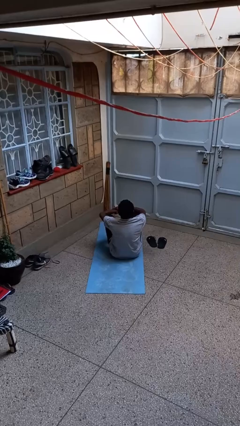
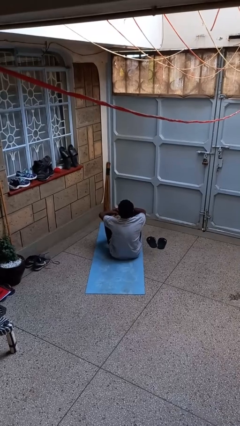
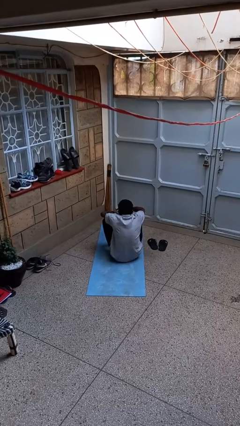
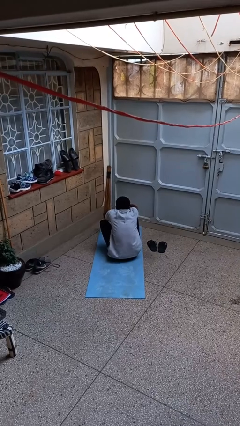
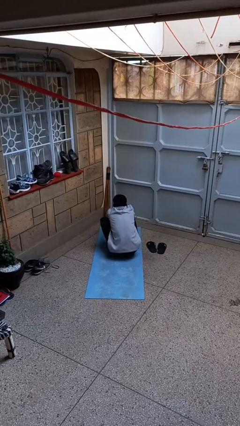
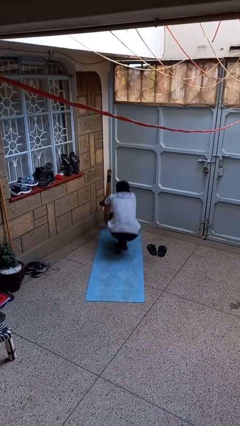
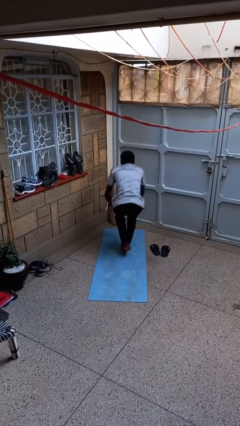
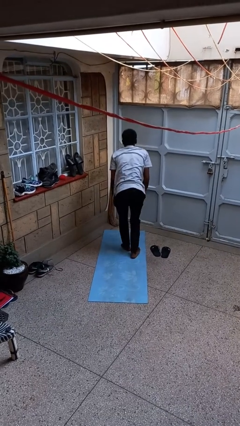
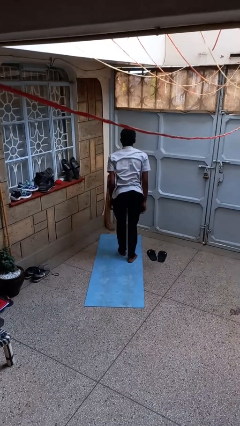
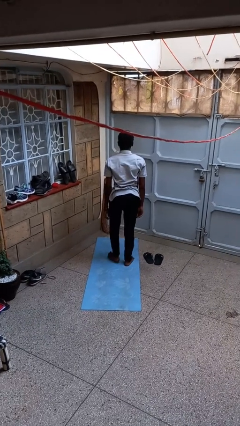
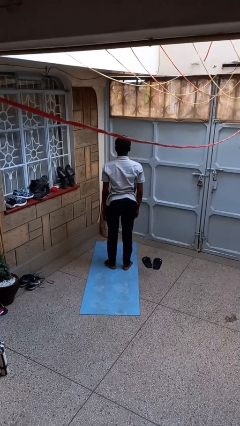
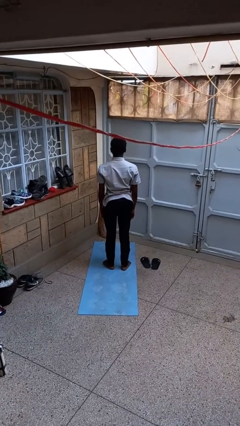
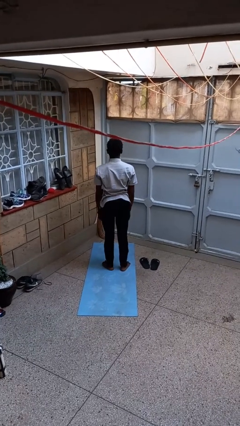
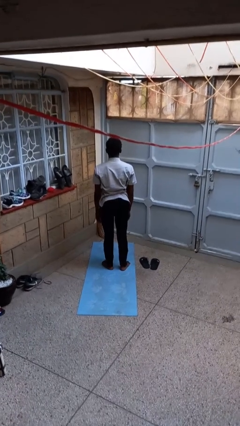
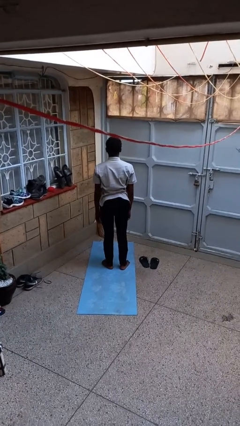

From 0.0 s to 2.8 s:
person stands up from floor

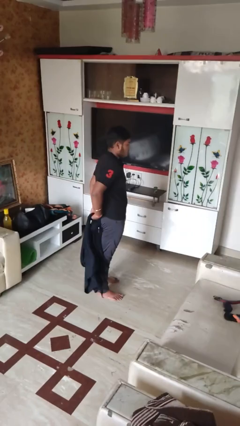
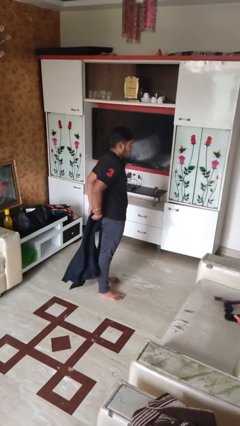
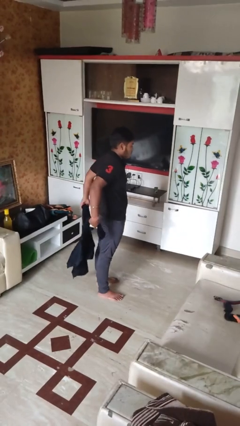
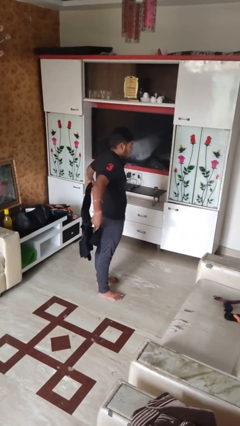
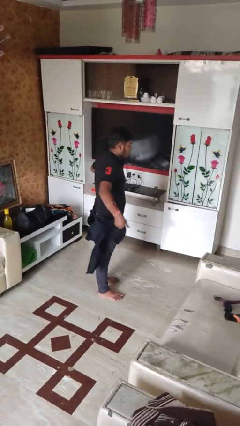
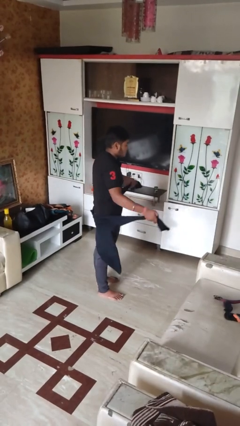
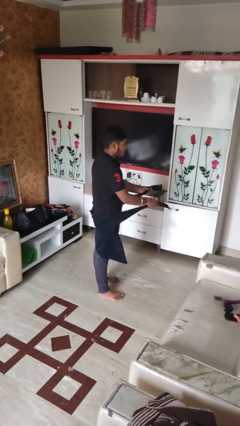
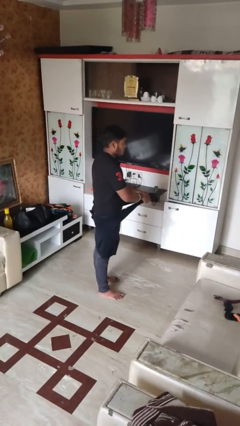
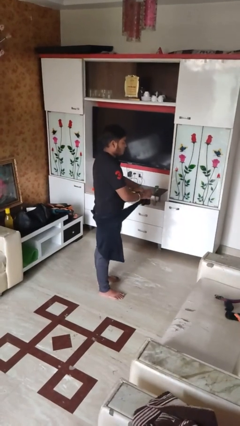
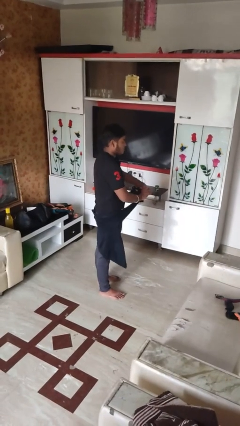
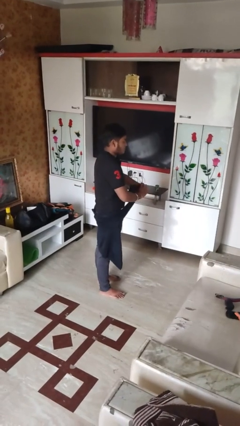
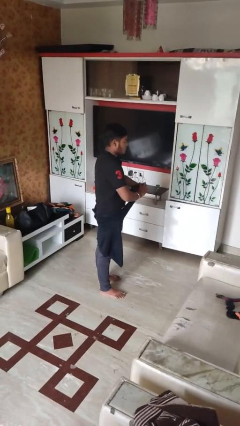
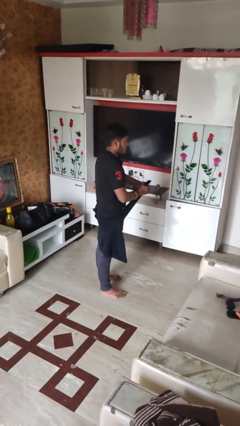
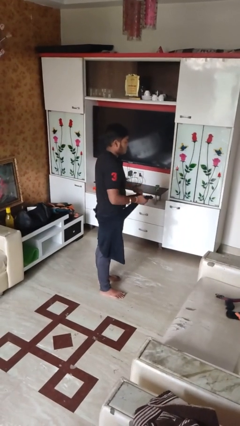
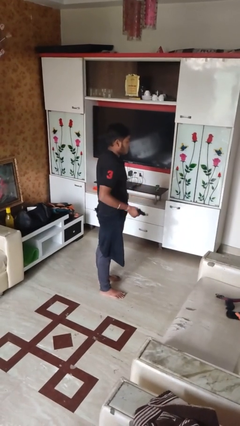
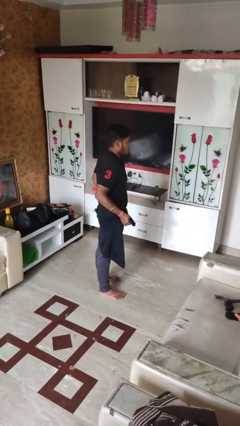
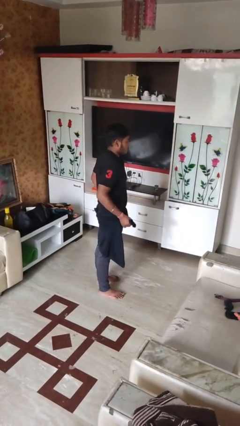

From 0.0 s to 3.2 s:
person ties jacket around waist

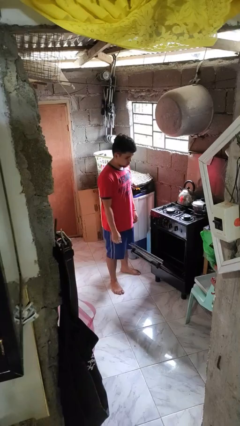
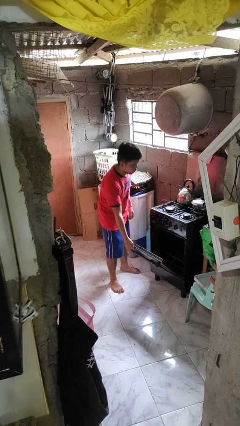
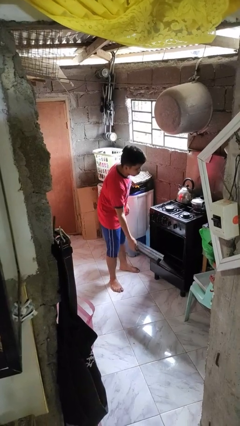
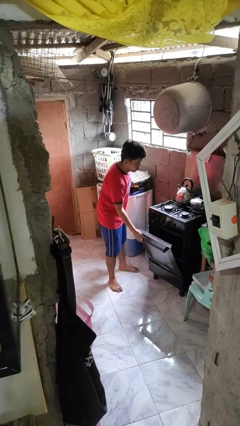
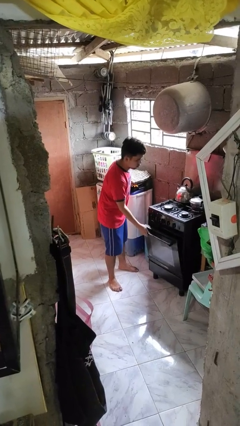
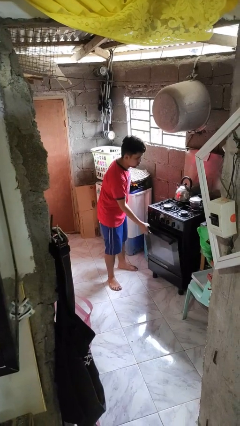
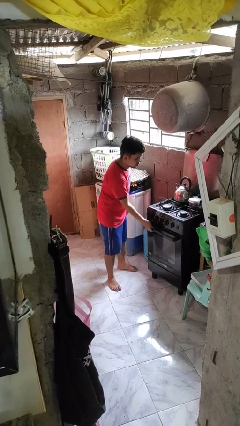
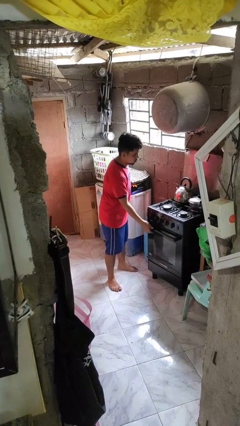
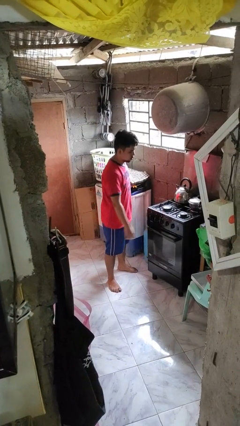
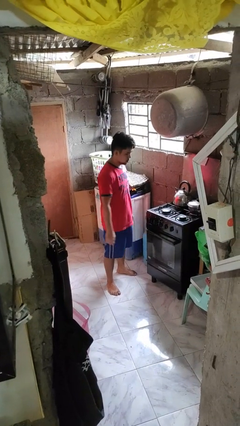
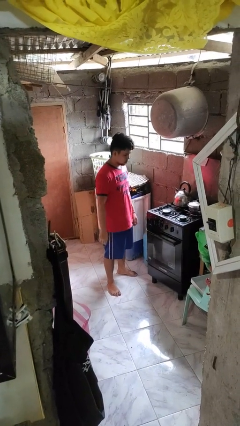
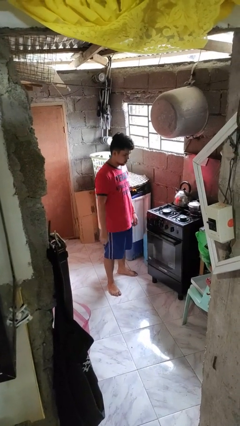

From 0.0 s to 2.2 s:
person closes oven door

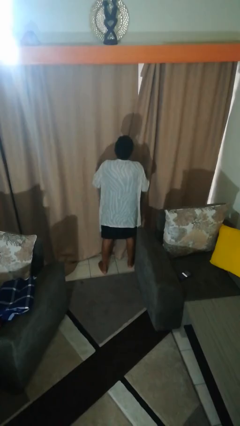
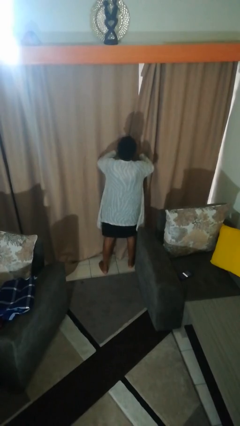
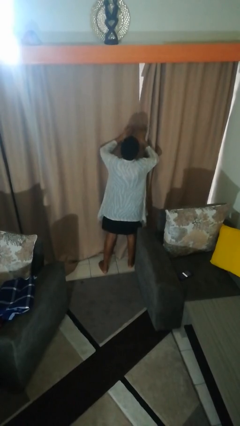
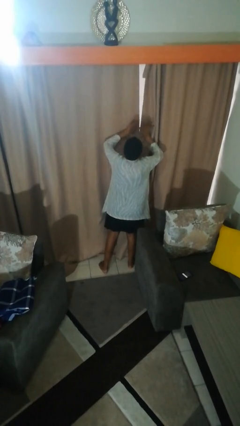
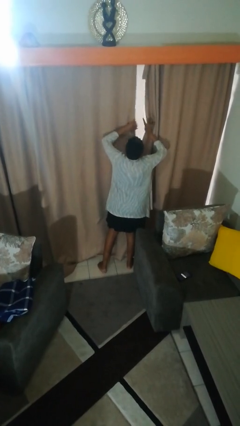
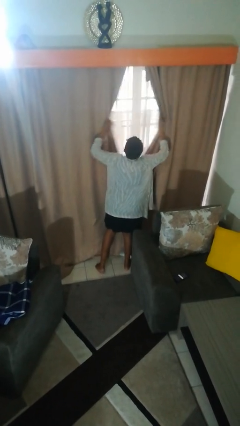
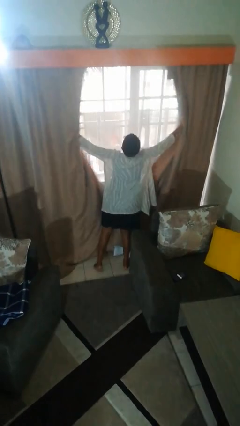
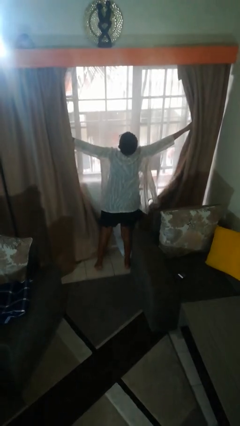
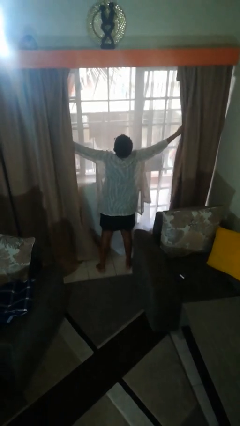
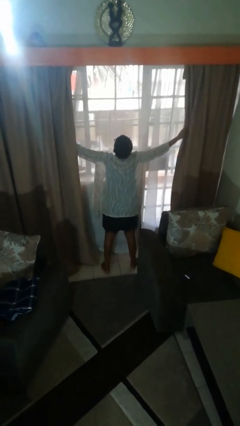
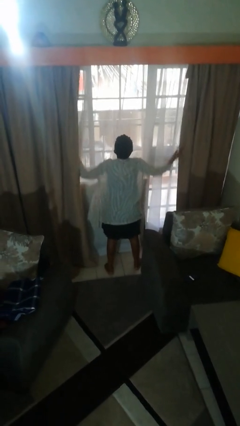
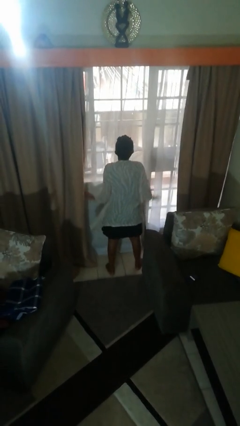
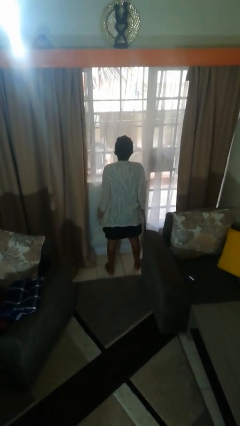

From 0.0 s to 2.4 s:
person opens curtains

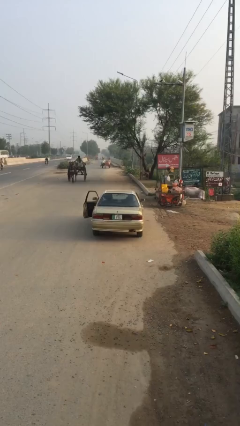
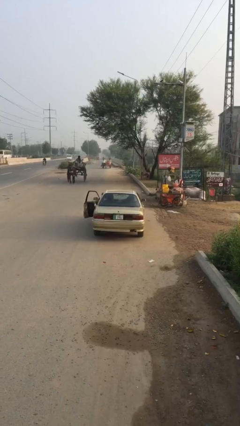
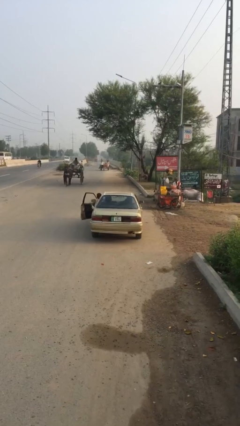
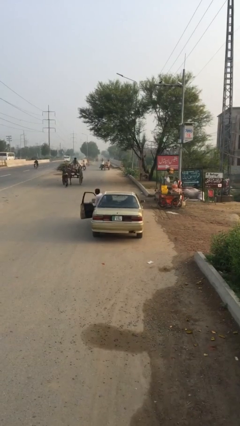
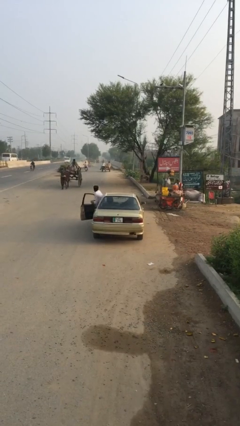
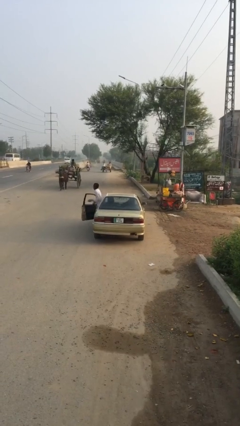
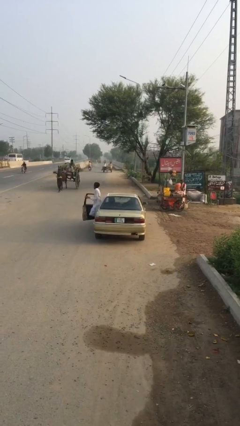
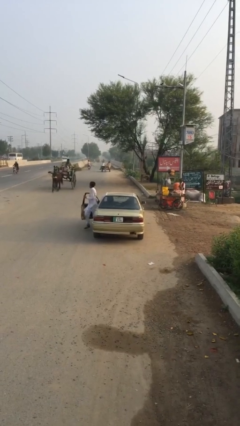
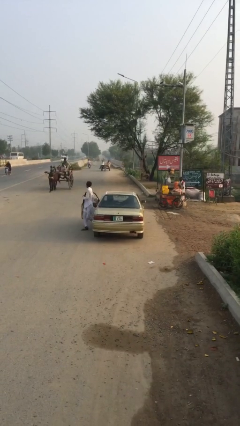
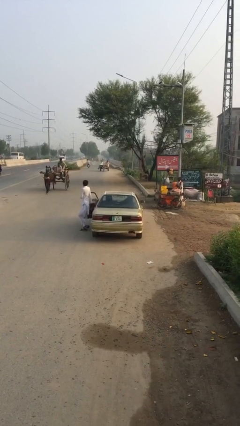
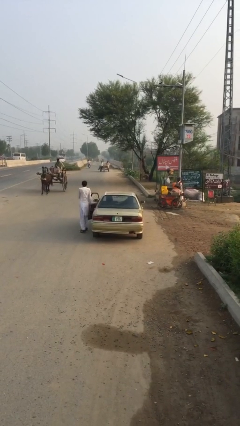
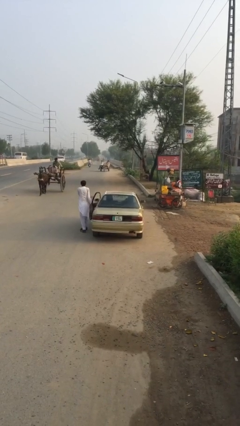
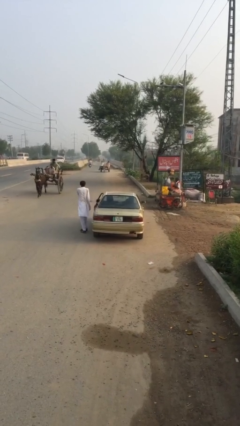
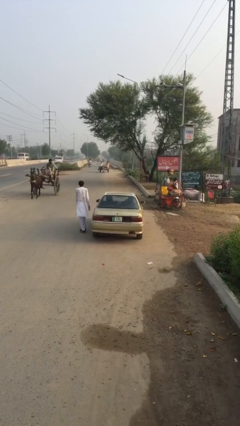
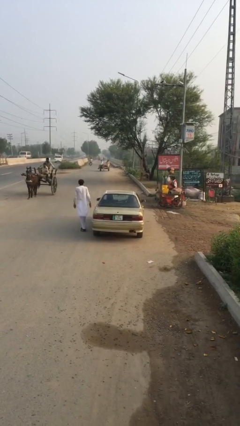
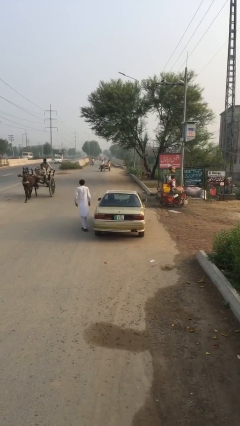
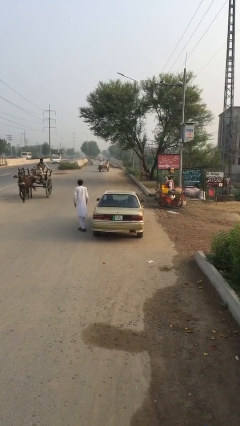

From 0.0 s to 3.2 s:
car drops off person

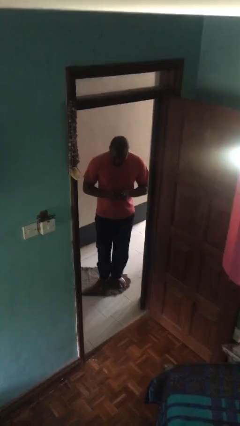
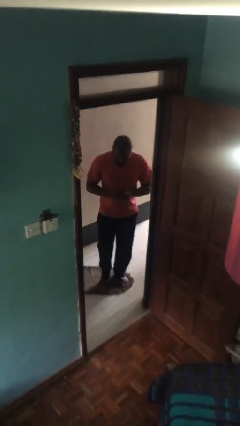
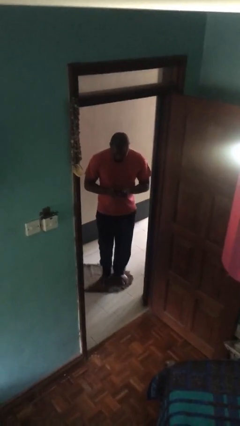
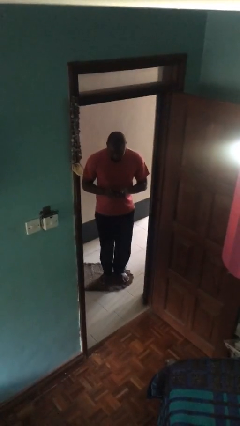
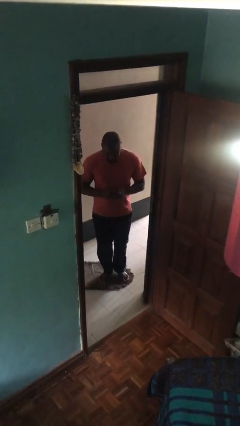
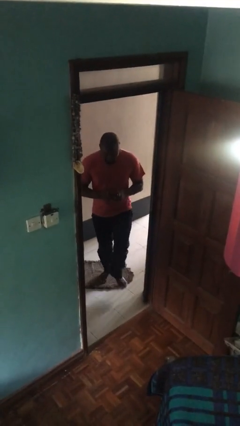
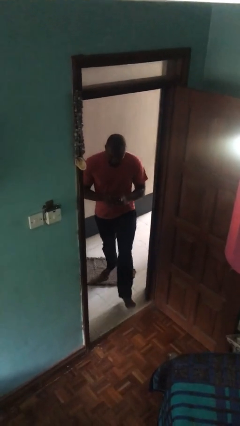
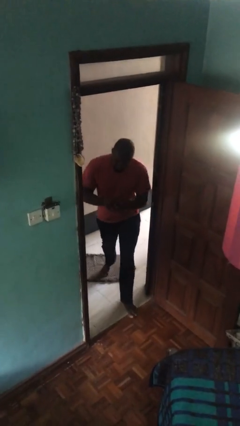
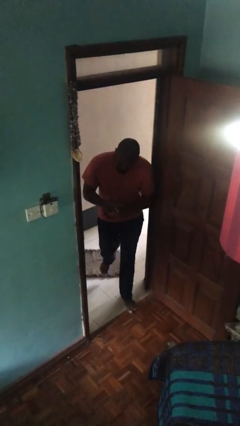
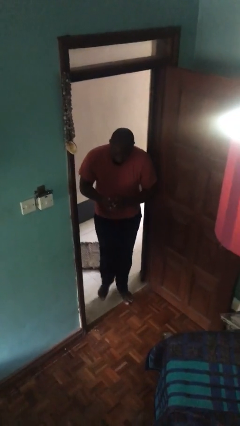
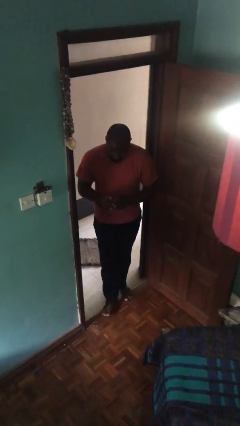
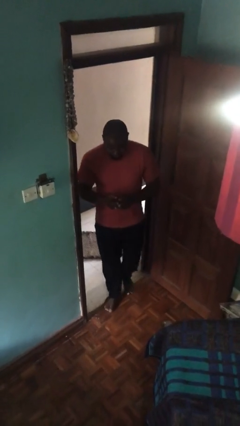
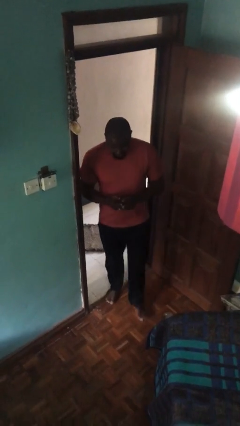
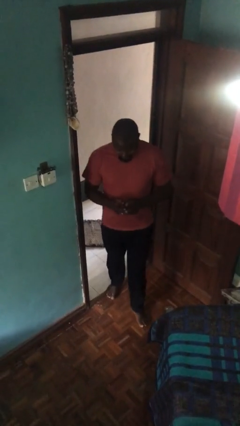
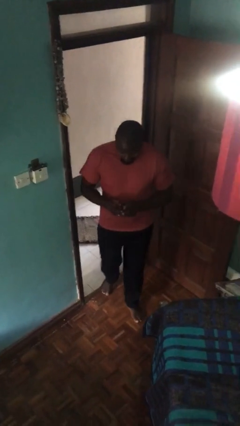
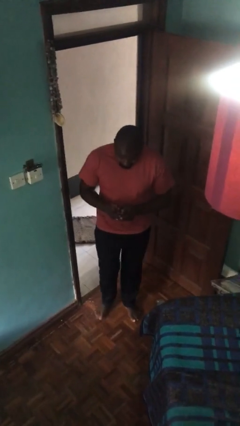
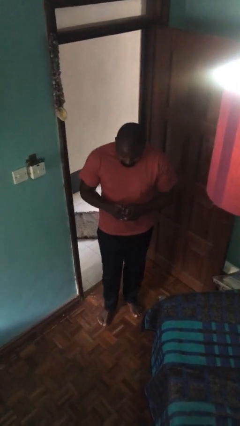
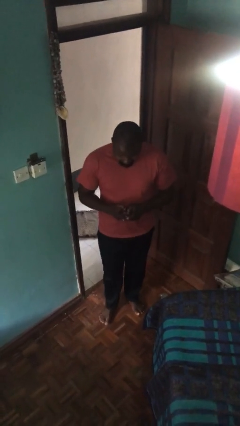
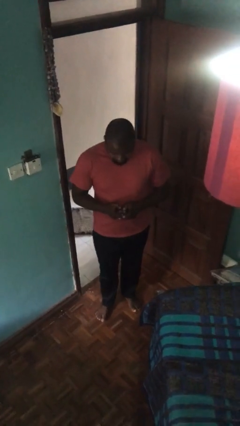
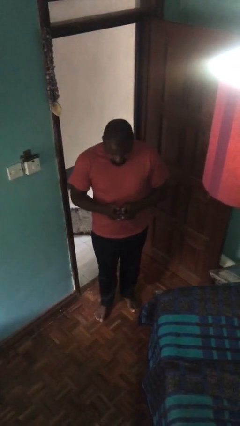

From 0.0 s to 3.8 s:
person enters scene through structure
